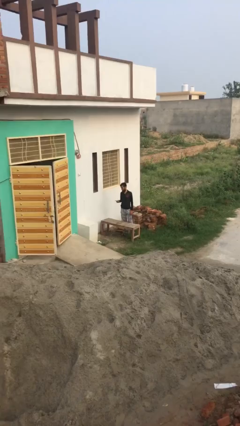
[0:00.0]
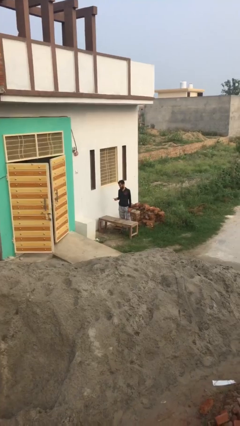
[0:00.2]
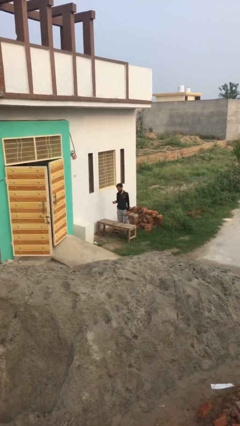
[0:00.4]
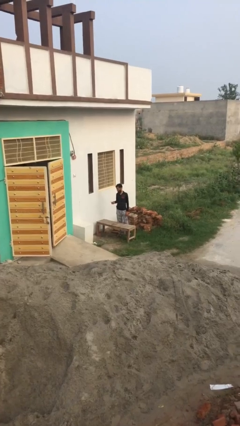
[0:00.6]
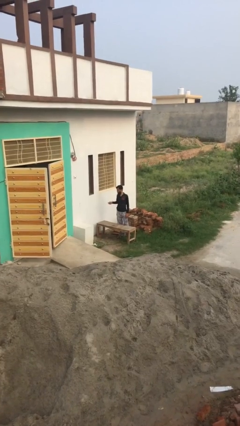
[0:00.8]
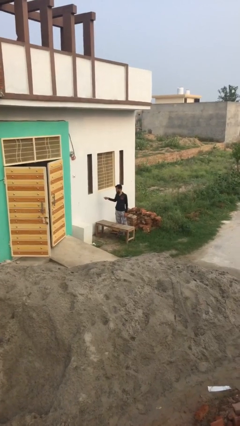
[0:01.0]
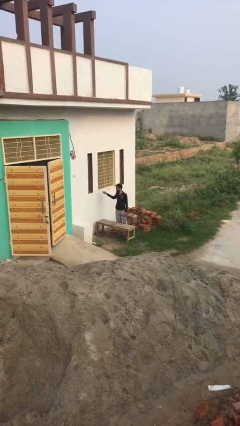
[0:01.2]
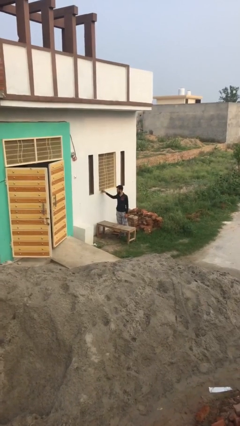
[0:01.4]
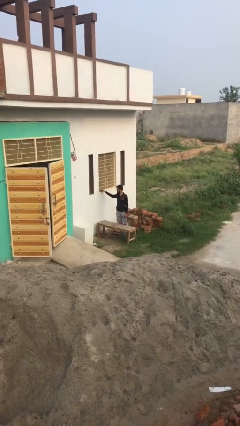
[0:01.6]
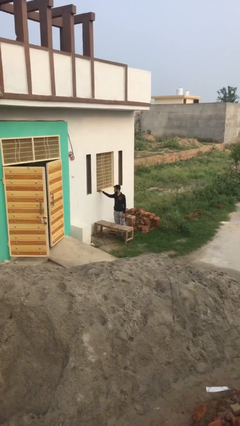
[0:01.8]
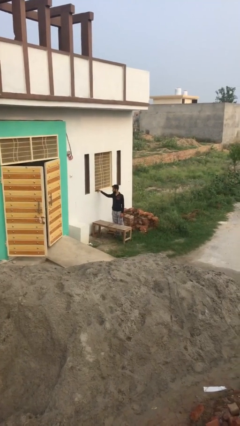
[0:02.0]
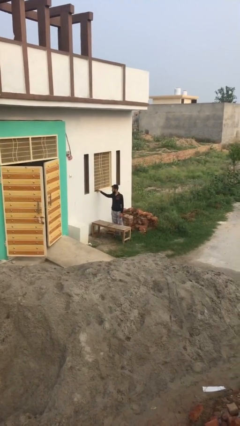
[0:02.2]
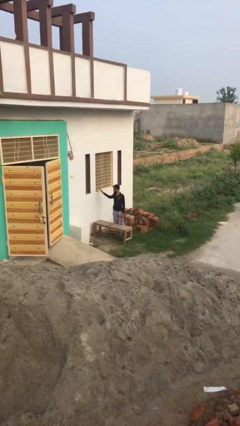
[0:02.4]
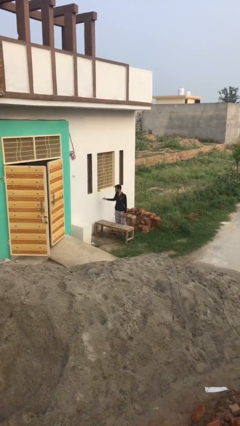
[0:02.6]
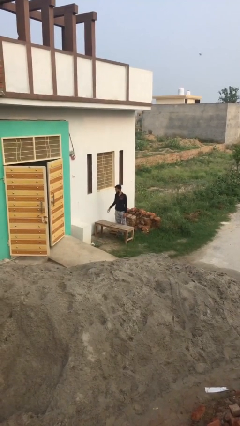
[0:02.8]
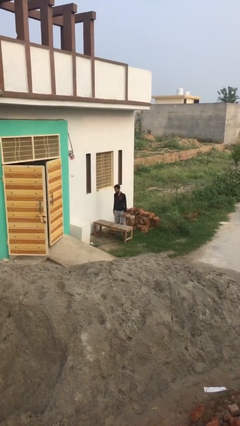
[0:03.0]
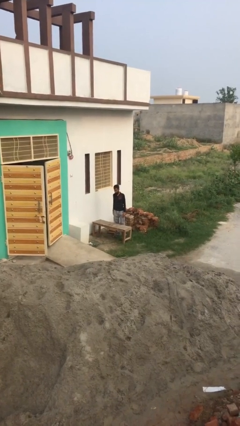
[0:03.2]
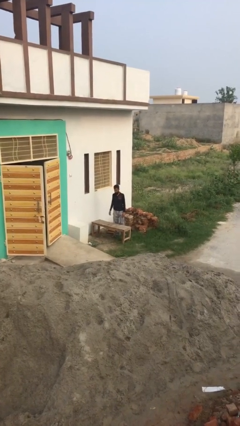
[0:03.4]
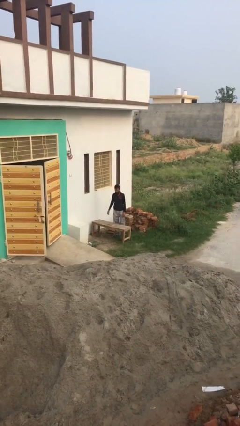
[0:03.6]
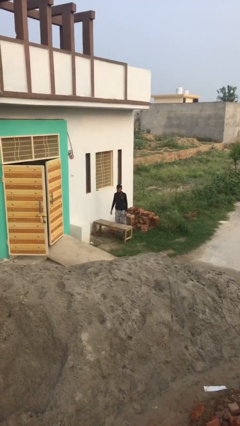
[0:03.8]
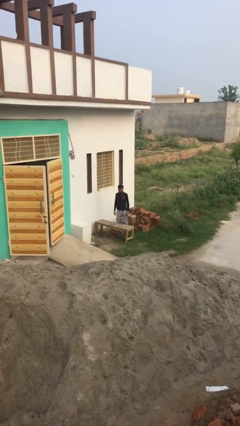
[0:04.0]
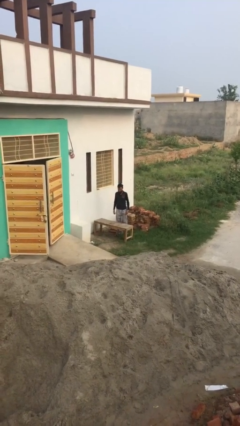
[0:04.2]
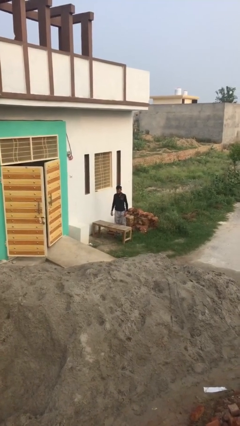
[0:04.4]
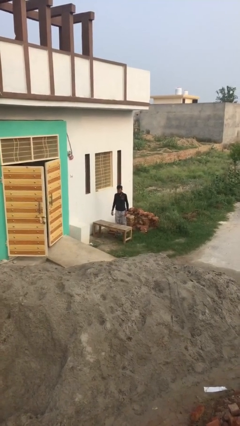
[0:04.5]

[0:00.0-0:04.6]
person puts down object on shelf

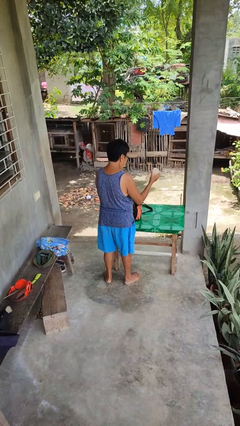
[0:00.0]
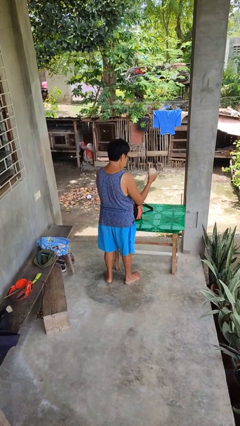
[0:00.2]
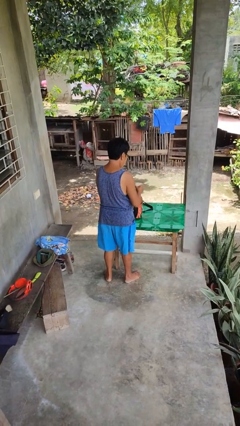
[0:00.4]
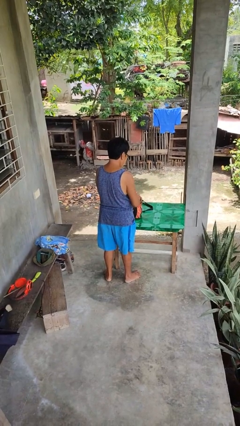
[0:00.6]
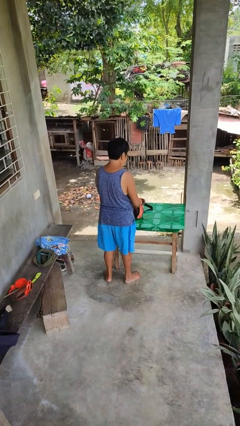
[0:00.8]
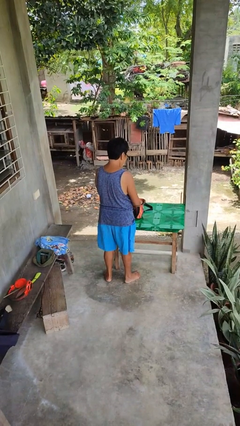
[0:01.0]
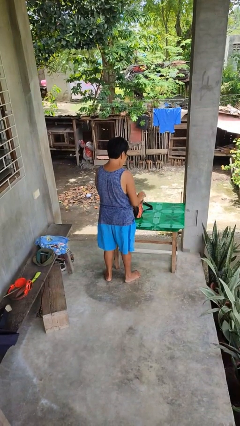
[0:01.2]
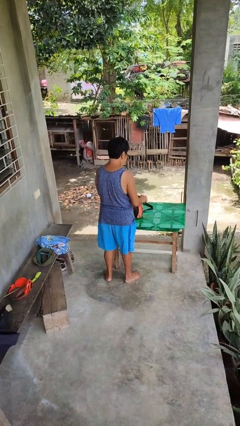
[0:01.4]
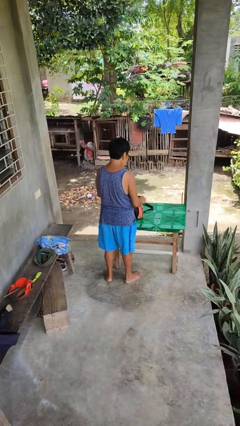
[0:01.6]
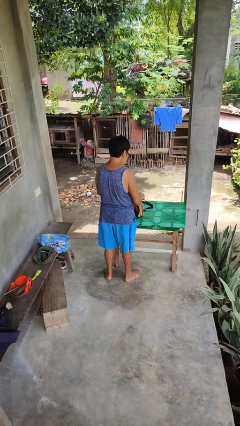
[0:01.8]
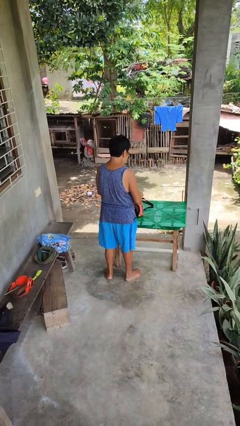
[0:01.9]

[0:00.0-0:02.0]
person puts object into purse

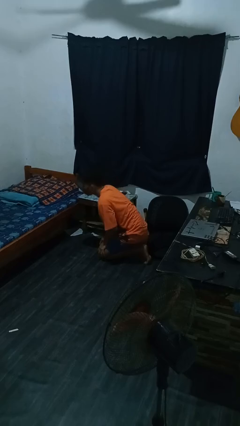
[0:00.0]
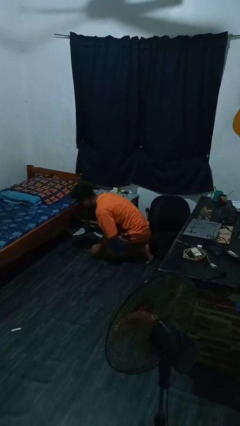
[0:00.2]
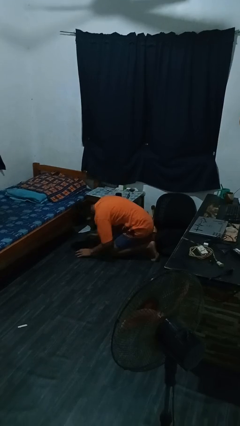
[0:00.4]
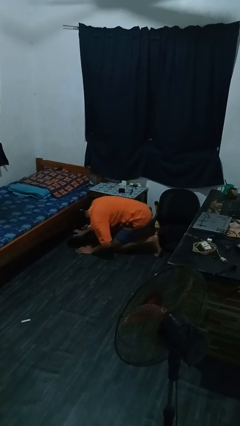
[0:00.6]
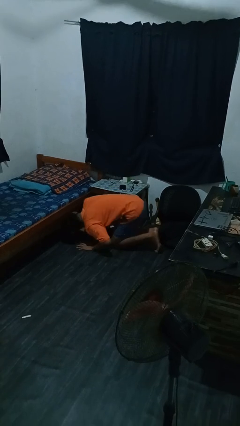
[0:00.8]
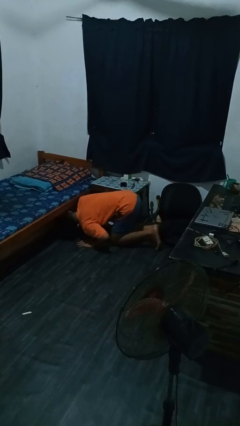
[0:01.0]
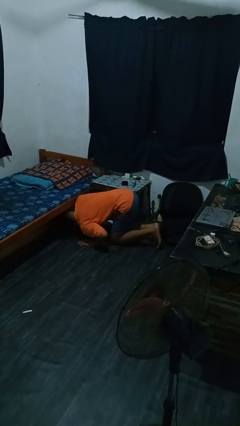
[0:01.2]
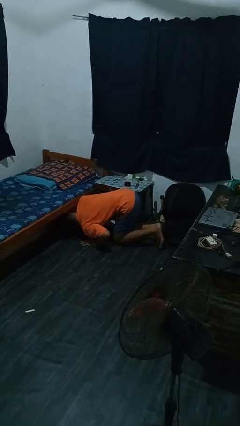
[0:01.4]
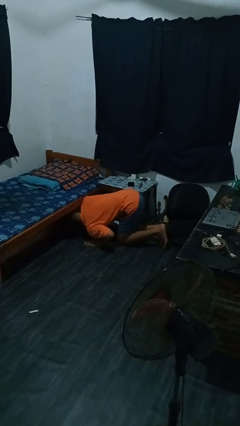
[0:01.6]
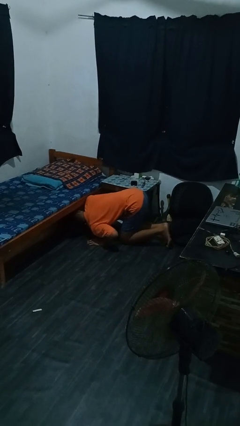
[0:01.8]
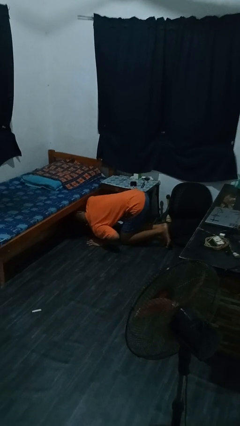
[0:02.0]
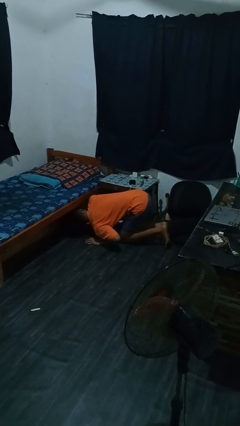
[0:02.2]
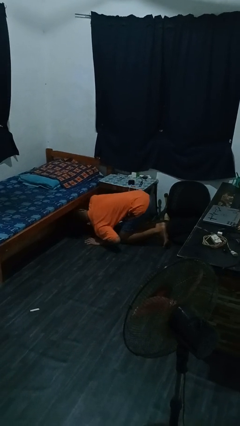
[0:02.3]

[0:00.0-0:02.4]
person searches under bed

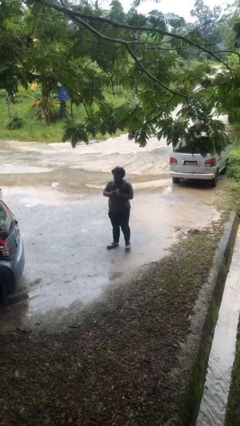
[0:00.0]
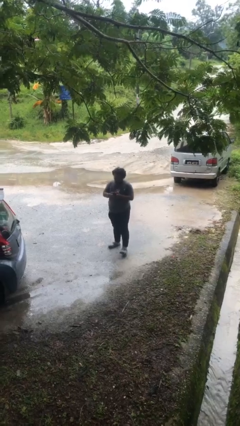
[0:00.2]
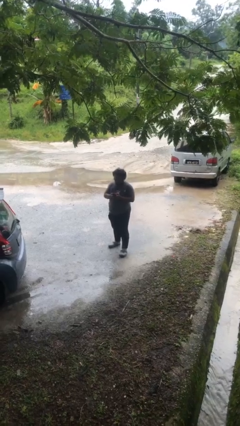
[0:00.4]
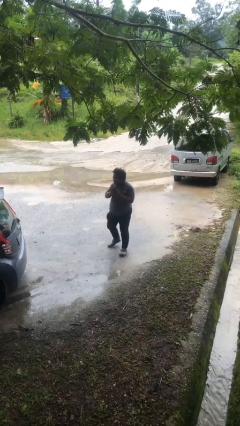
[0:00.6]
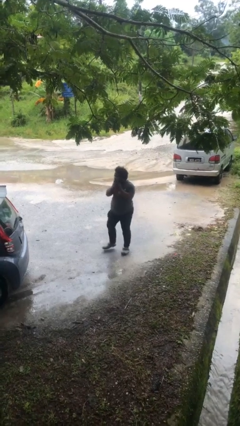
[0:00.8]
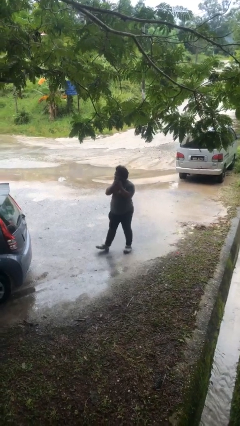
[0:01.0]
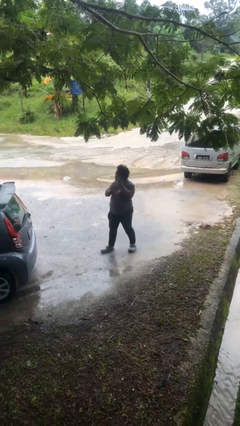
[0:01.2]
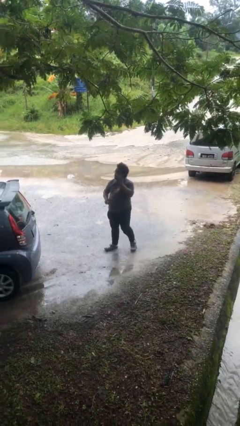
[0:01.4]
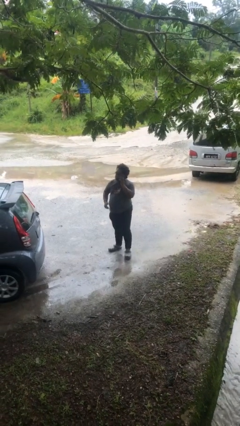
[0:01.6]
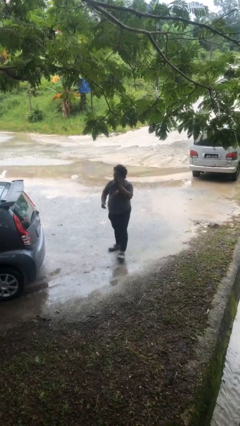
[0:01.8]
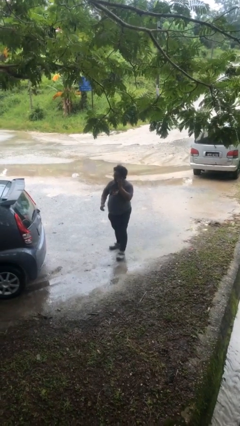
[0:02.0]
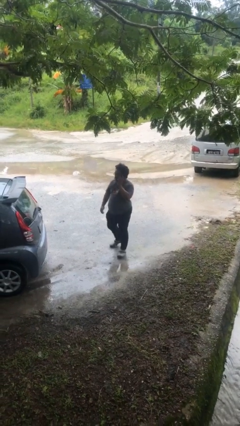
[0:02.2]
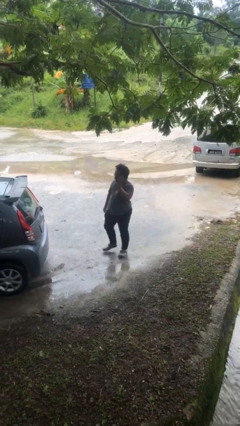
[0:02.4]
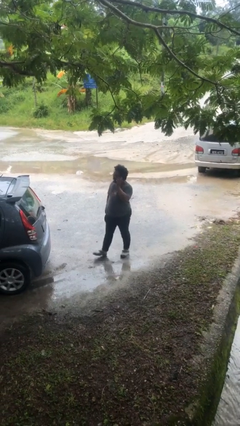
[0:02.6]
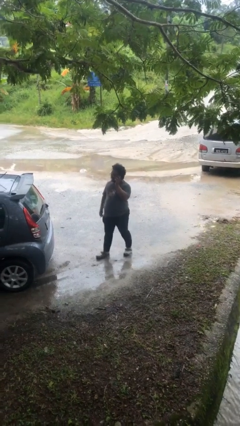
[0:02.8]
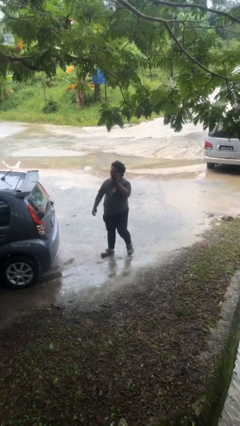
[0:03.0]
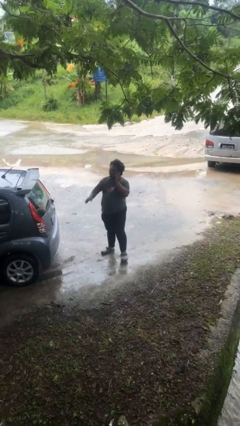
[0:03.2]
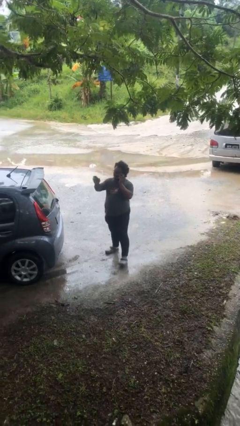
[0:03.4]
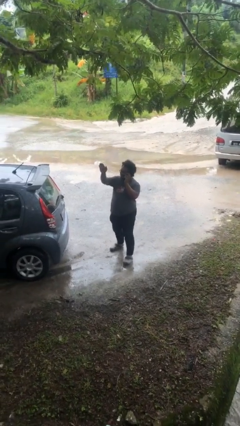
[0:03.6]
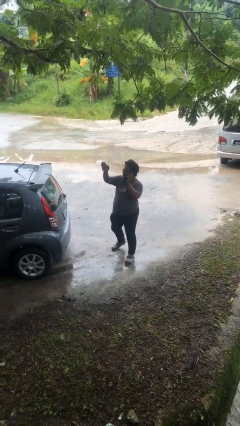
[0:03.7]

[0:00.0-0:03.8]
person talks on phone

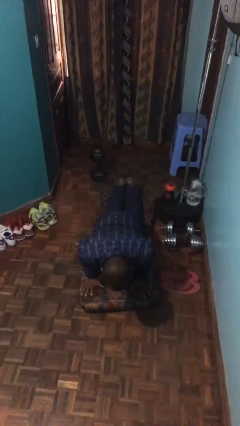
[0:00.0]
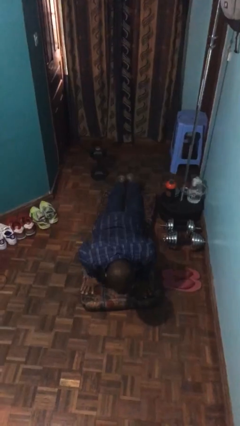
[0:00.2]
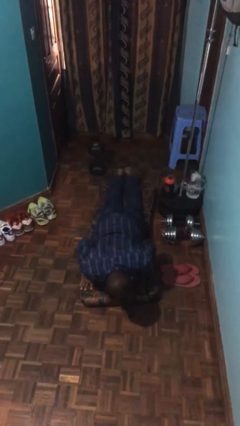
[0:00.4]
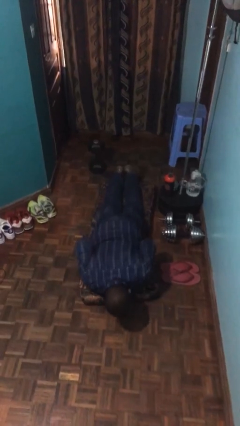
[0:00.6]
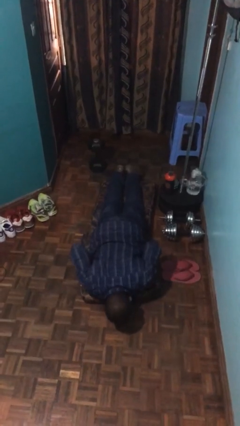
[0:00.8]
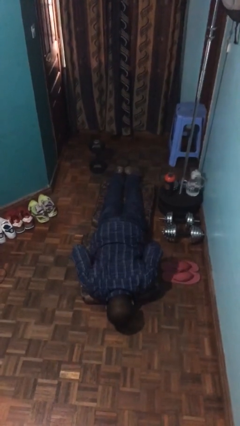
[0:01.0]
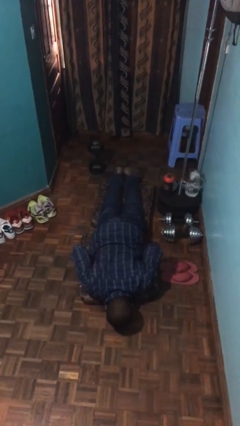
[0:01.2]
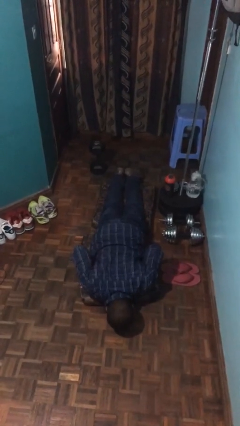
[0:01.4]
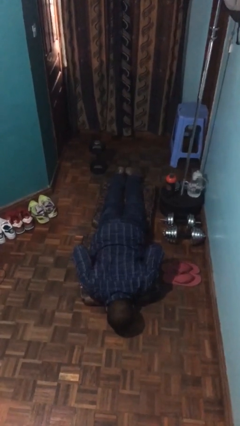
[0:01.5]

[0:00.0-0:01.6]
person lies down on floor

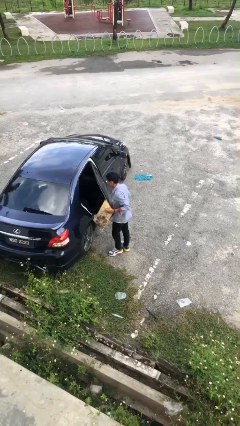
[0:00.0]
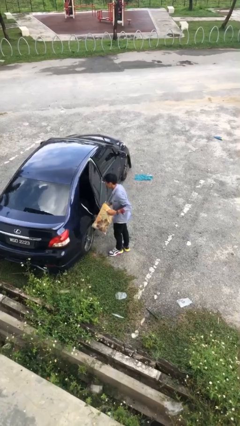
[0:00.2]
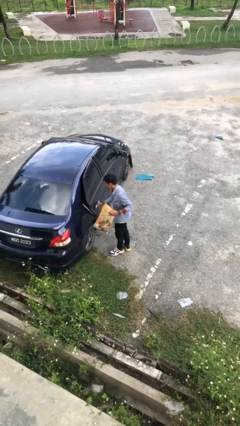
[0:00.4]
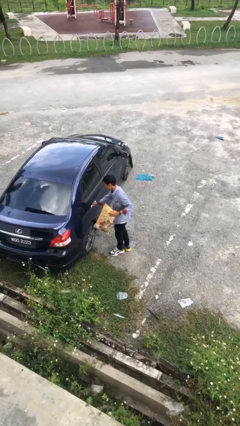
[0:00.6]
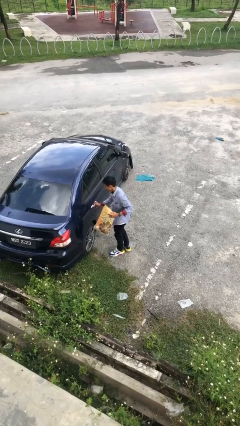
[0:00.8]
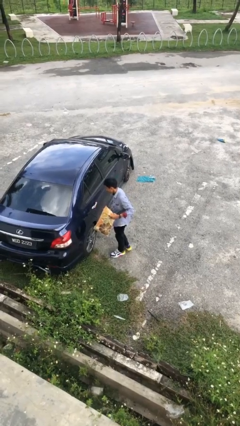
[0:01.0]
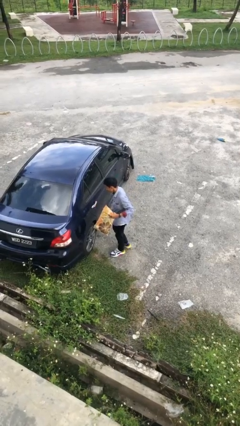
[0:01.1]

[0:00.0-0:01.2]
person closes car door

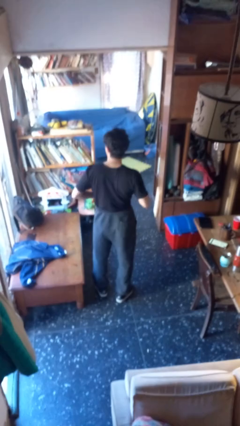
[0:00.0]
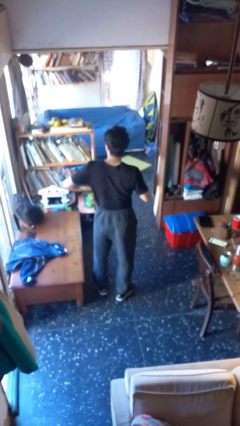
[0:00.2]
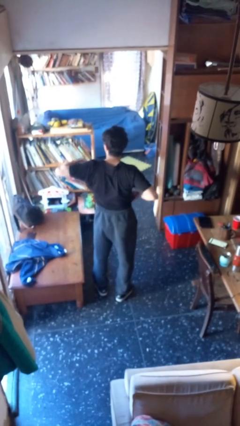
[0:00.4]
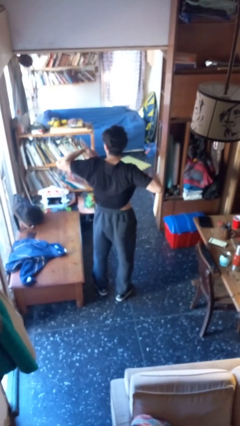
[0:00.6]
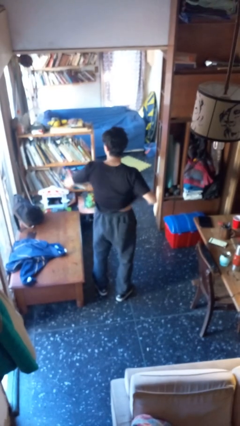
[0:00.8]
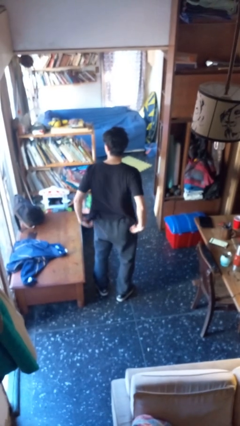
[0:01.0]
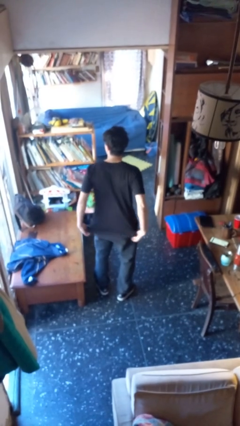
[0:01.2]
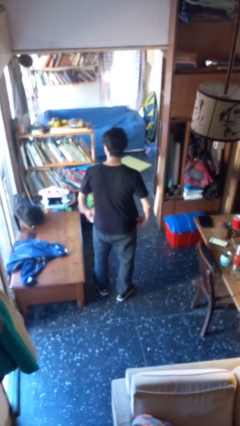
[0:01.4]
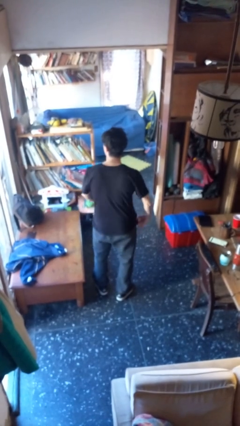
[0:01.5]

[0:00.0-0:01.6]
person untucks shirt
